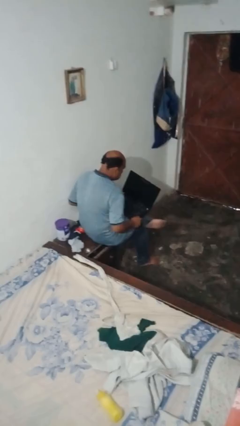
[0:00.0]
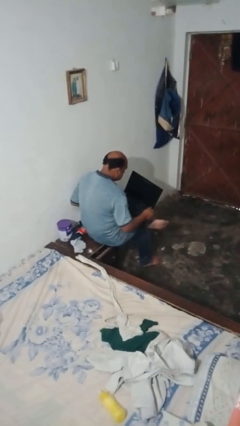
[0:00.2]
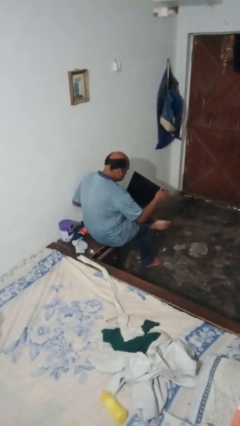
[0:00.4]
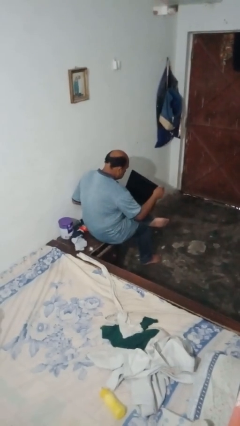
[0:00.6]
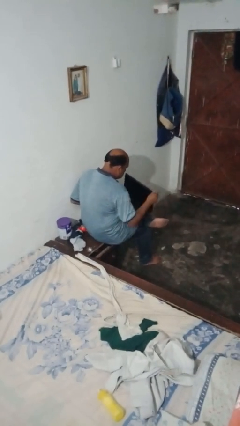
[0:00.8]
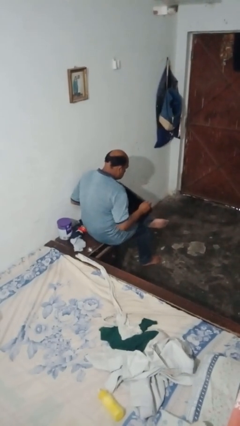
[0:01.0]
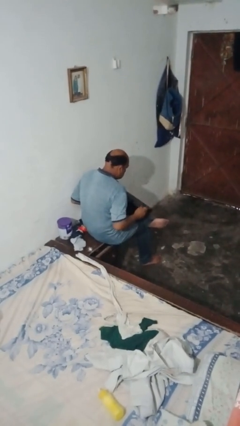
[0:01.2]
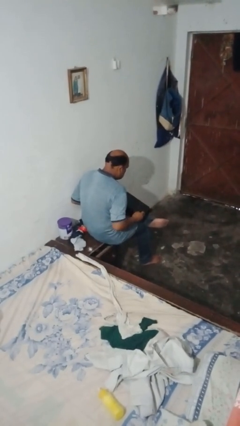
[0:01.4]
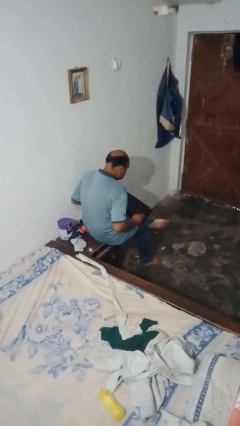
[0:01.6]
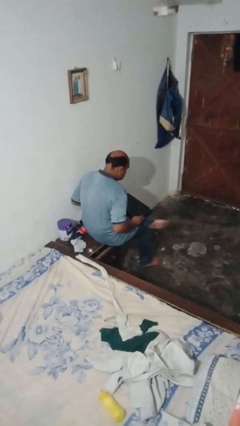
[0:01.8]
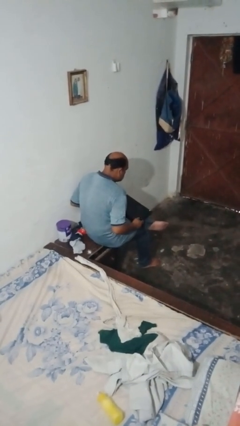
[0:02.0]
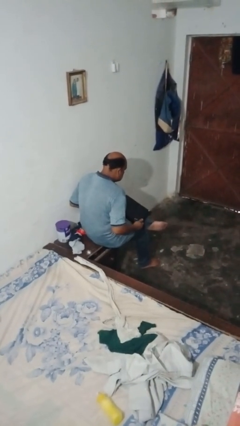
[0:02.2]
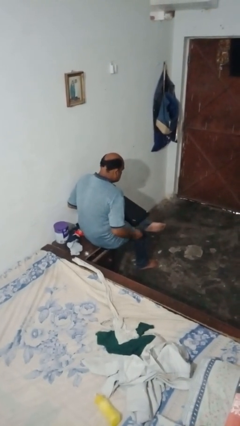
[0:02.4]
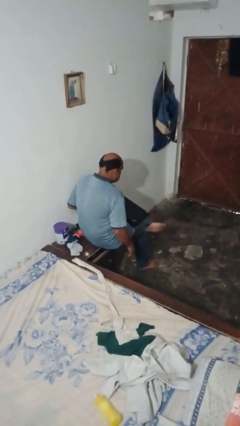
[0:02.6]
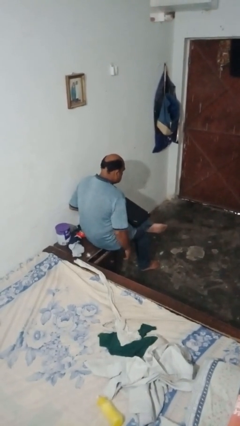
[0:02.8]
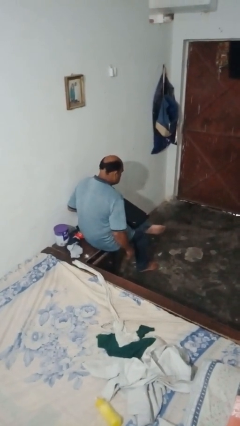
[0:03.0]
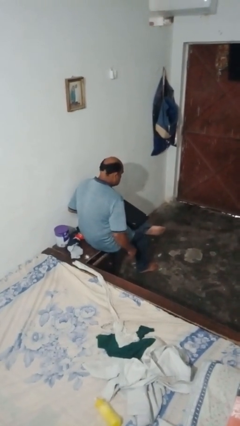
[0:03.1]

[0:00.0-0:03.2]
person closes laptop

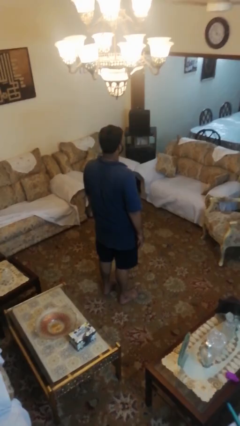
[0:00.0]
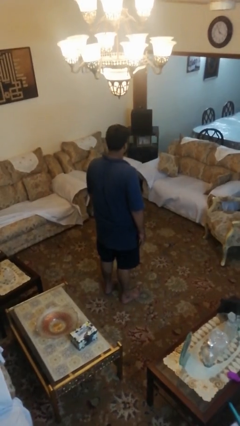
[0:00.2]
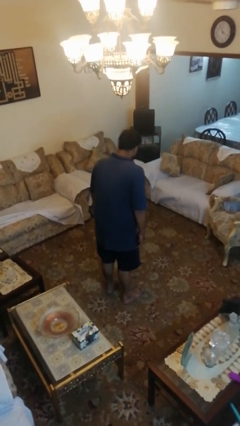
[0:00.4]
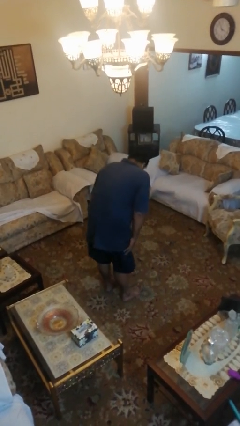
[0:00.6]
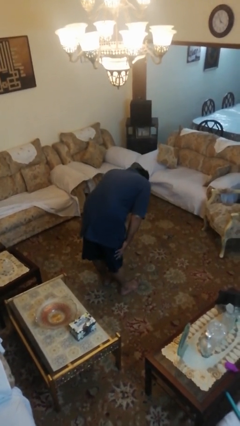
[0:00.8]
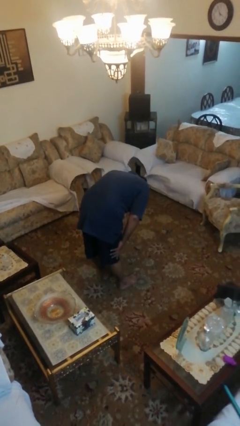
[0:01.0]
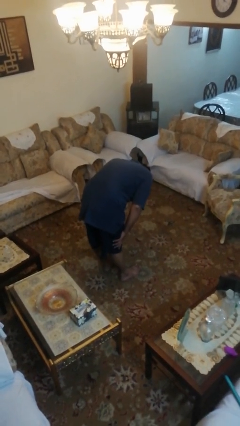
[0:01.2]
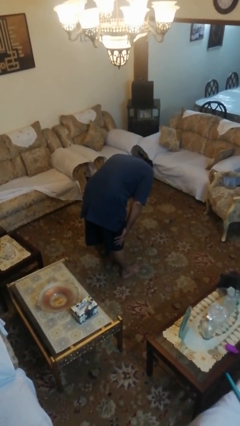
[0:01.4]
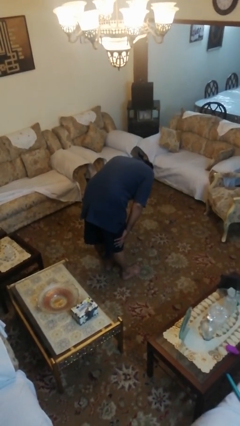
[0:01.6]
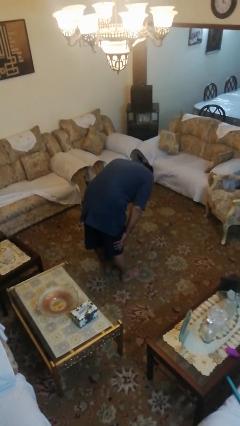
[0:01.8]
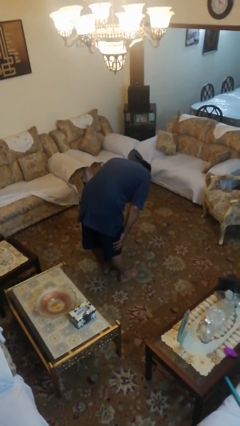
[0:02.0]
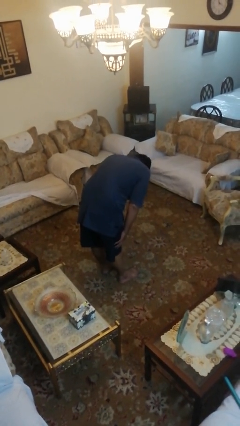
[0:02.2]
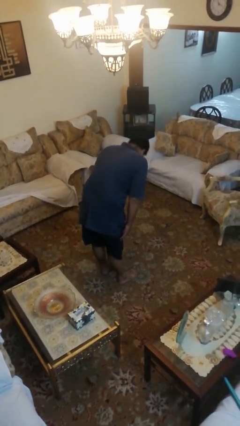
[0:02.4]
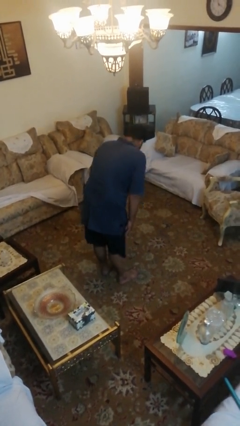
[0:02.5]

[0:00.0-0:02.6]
person bows

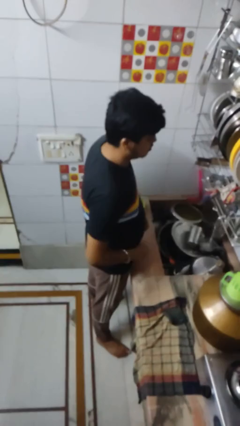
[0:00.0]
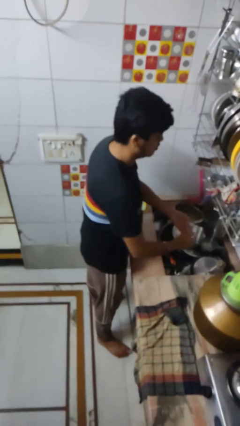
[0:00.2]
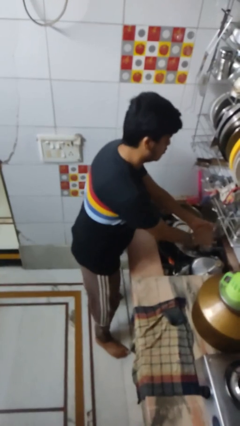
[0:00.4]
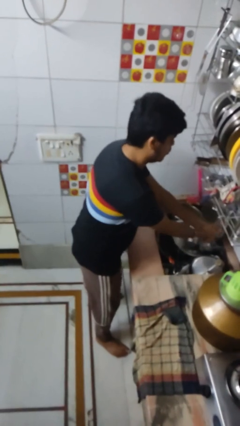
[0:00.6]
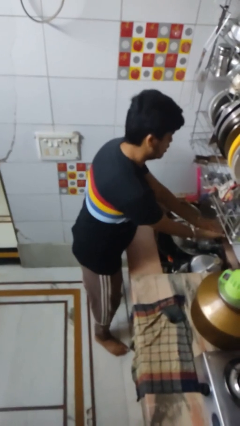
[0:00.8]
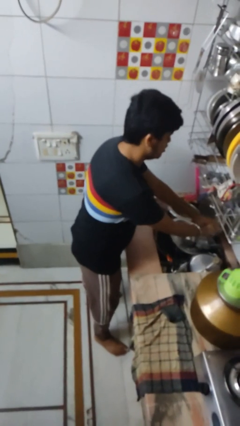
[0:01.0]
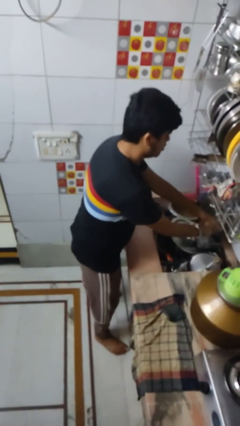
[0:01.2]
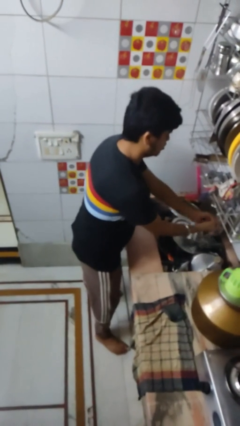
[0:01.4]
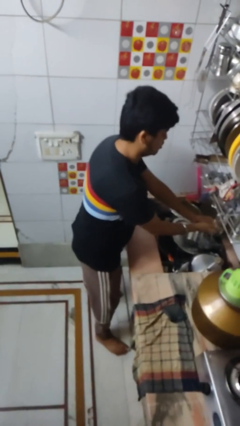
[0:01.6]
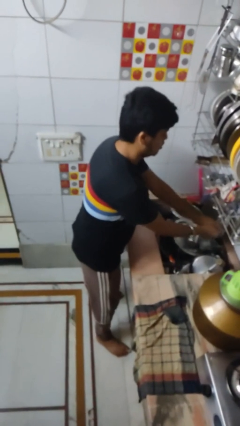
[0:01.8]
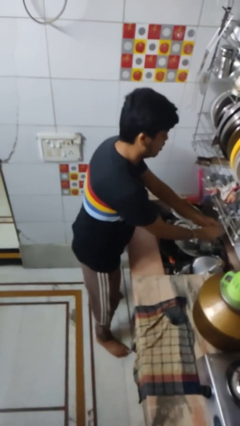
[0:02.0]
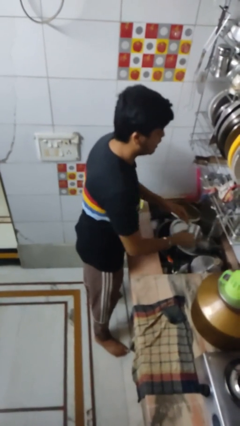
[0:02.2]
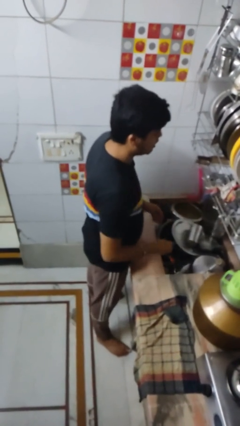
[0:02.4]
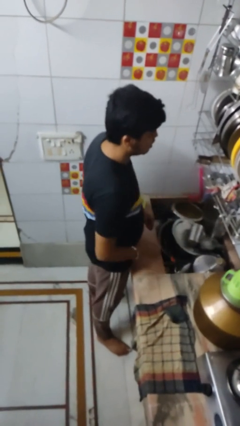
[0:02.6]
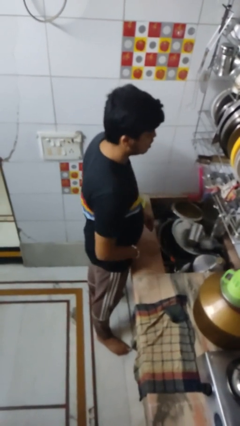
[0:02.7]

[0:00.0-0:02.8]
person washes hands

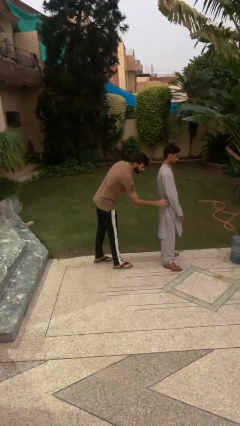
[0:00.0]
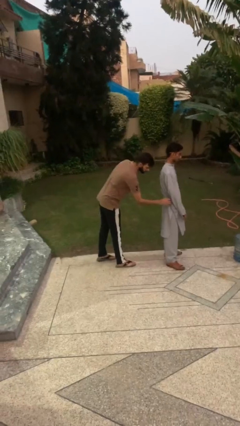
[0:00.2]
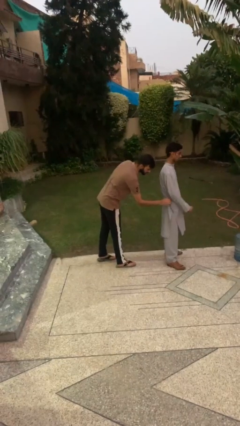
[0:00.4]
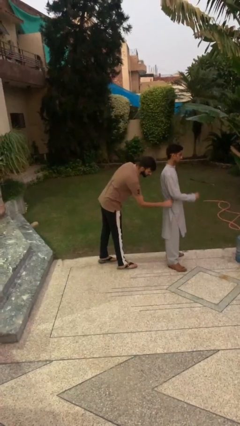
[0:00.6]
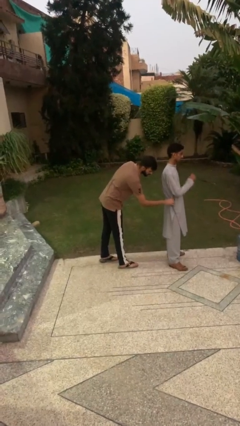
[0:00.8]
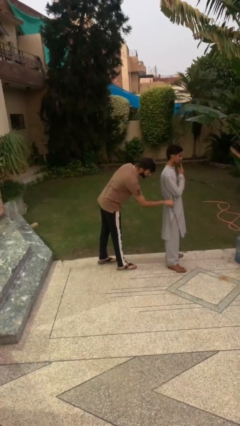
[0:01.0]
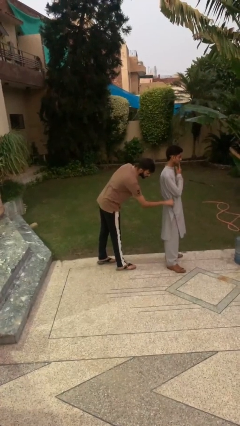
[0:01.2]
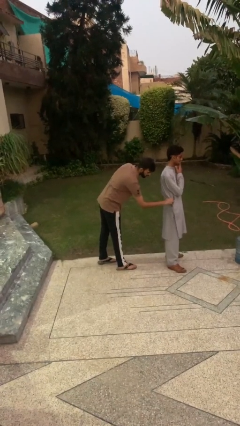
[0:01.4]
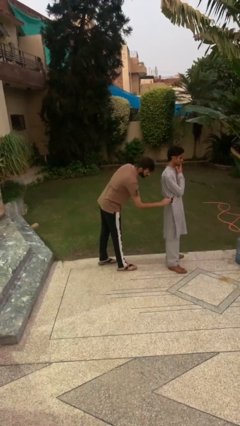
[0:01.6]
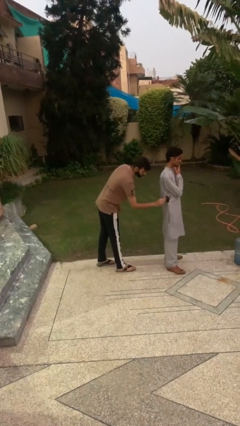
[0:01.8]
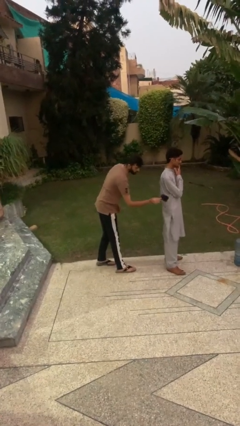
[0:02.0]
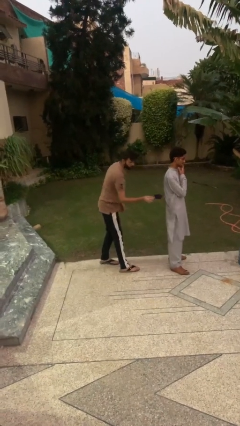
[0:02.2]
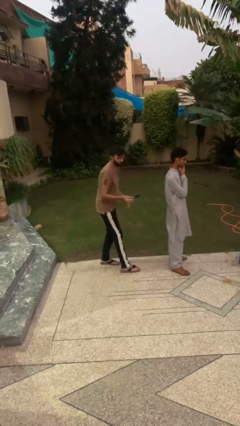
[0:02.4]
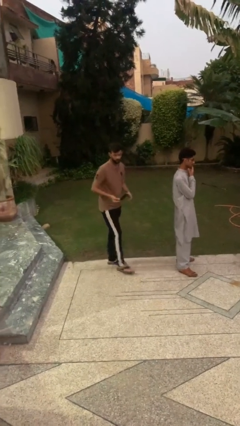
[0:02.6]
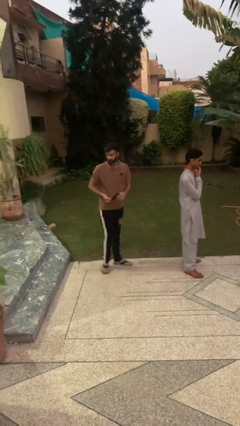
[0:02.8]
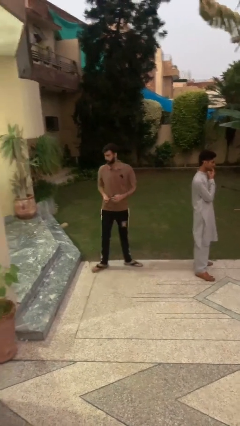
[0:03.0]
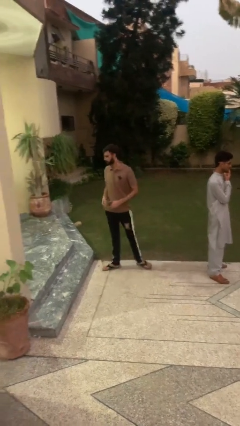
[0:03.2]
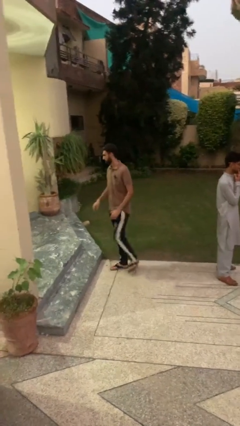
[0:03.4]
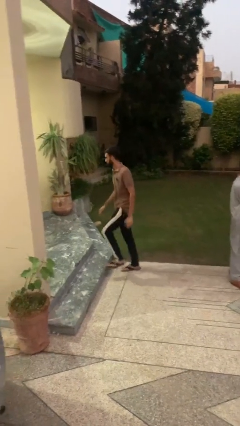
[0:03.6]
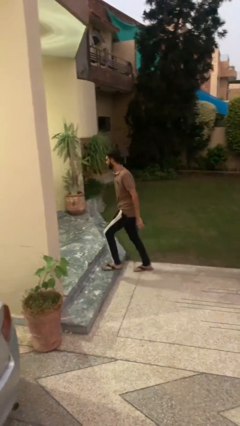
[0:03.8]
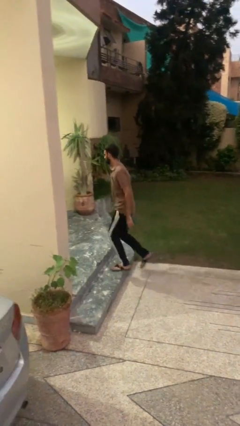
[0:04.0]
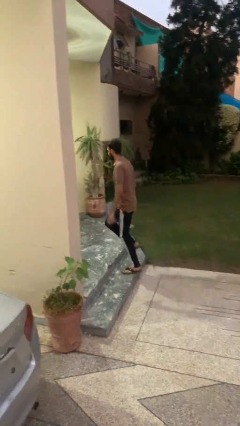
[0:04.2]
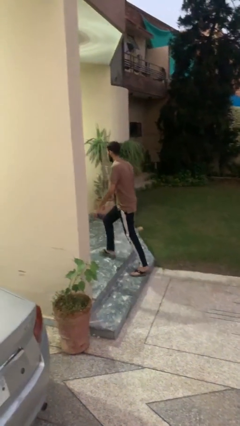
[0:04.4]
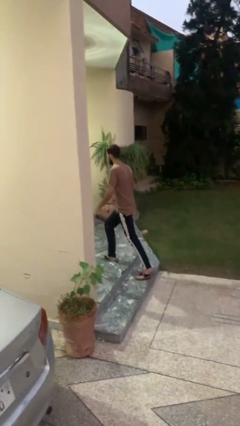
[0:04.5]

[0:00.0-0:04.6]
person steals object from person

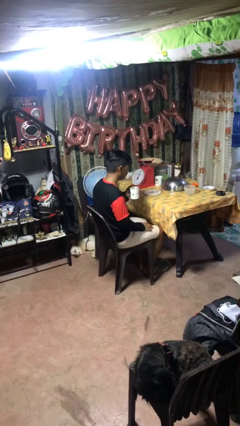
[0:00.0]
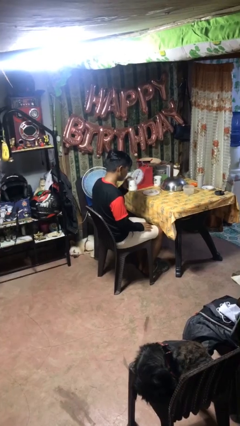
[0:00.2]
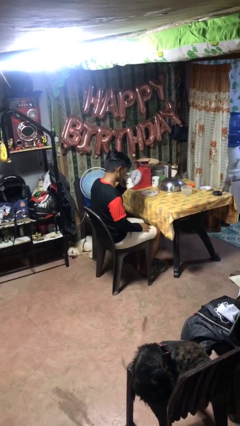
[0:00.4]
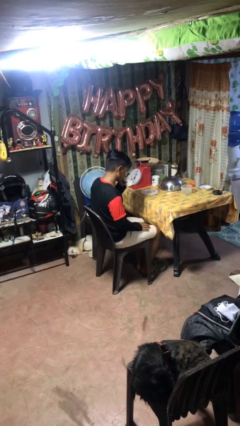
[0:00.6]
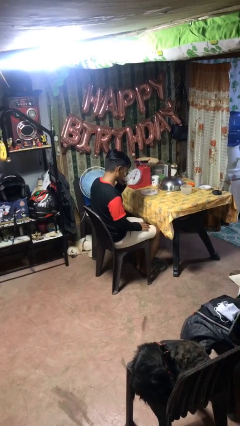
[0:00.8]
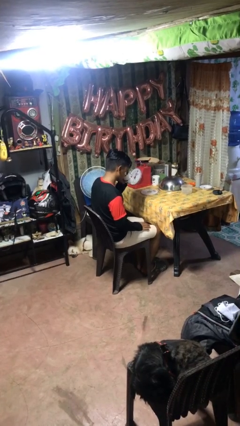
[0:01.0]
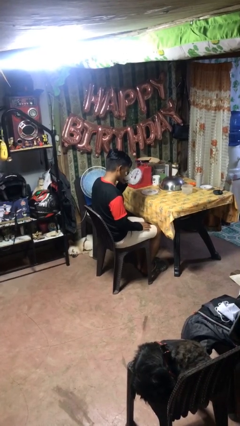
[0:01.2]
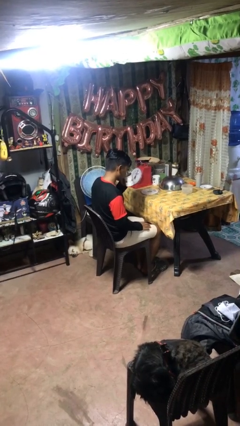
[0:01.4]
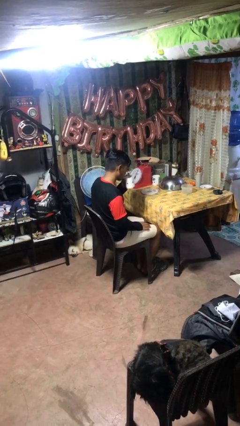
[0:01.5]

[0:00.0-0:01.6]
person drinks from mug

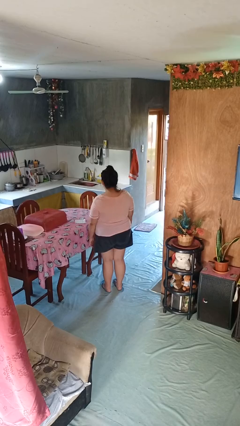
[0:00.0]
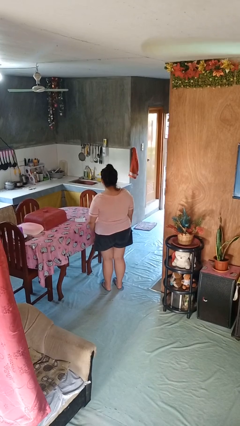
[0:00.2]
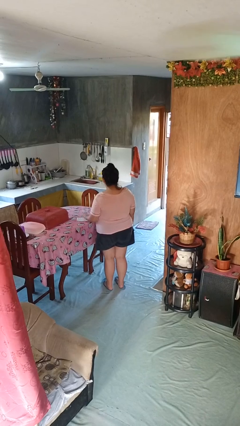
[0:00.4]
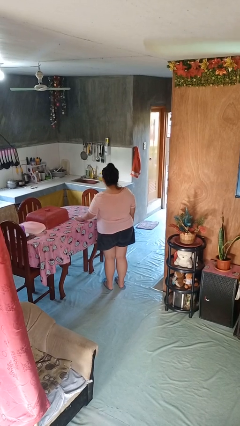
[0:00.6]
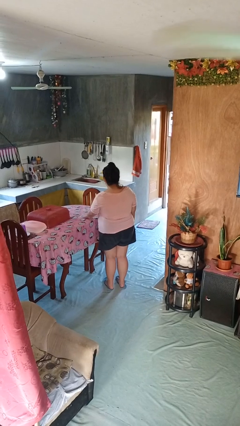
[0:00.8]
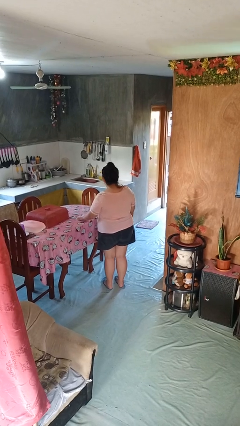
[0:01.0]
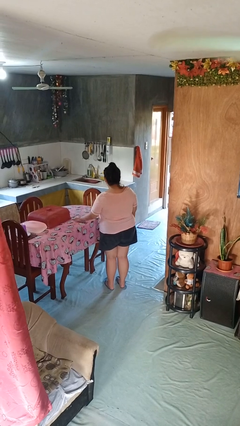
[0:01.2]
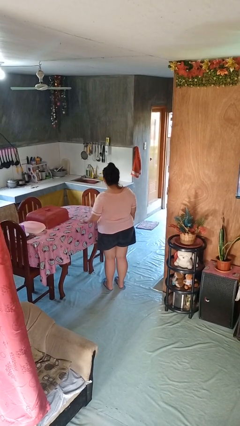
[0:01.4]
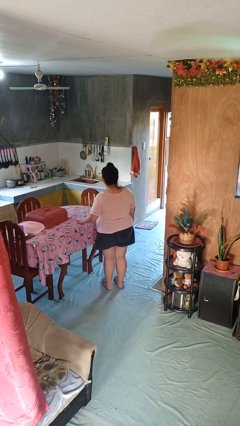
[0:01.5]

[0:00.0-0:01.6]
person cleans table with rag

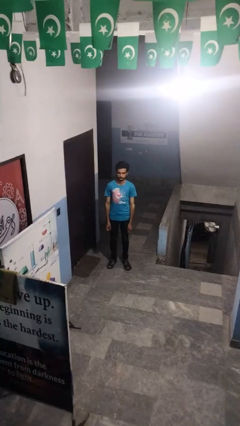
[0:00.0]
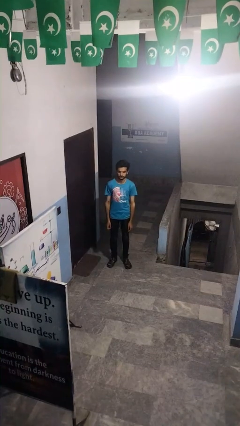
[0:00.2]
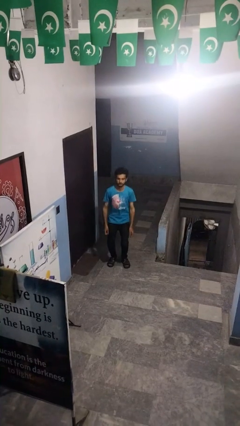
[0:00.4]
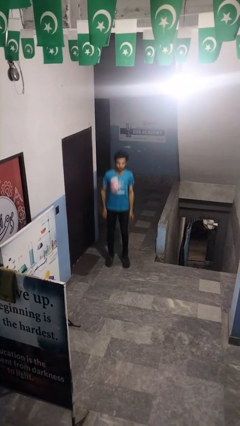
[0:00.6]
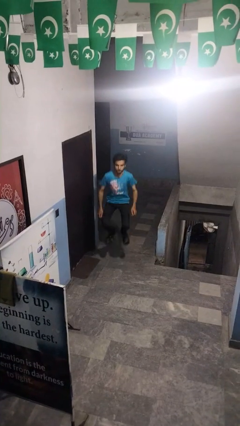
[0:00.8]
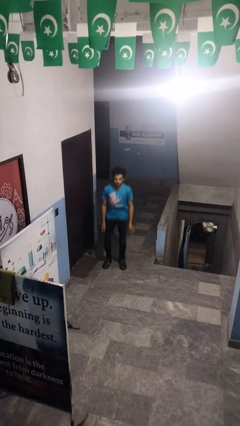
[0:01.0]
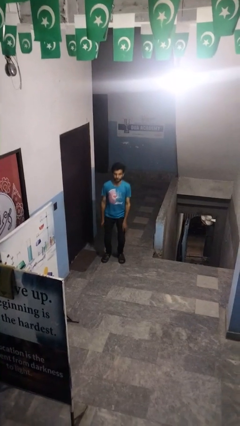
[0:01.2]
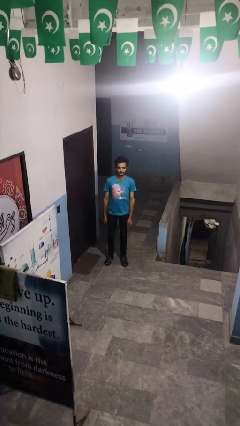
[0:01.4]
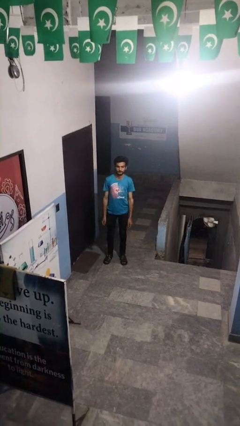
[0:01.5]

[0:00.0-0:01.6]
person jumps
